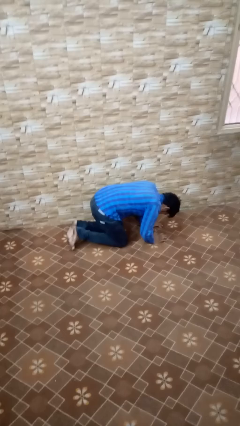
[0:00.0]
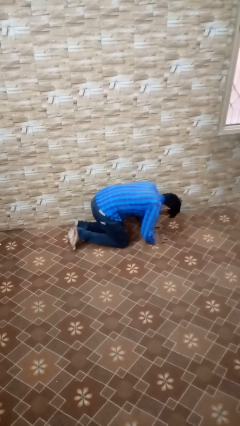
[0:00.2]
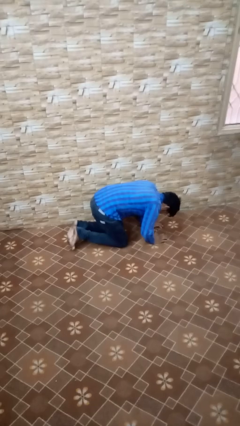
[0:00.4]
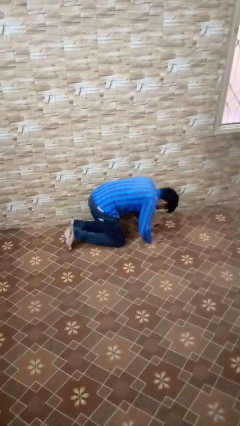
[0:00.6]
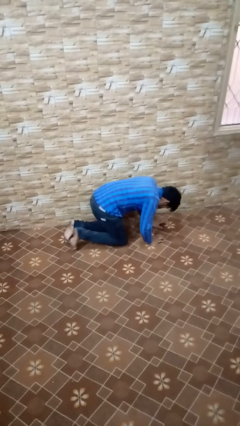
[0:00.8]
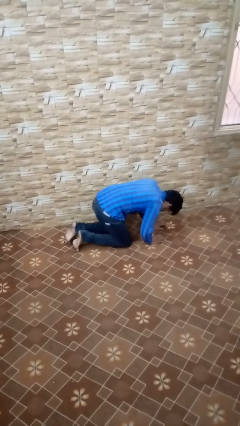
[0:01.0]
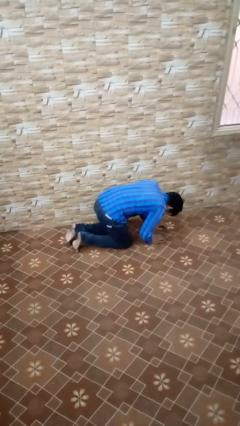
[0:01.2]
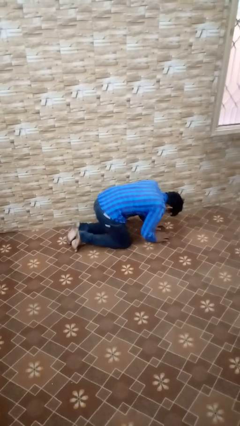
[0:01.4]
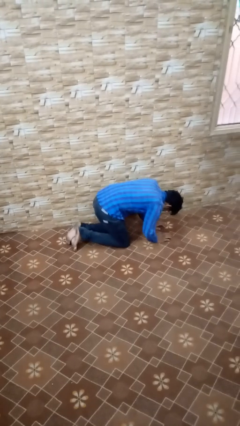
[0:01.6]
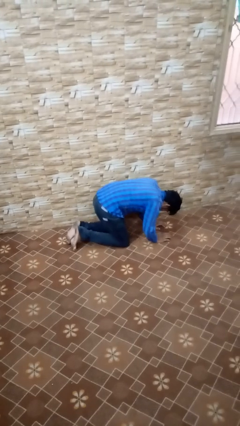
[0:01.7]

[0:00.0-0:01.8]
person crawls

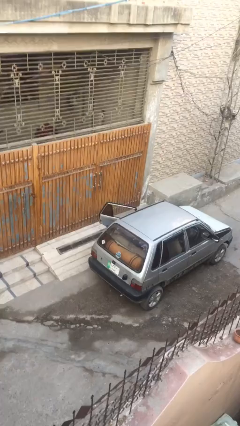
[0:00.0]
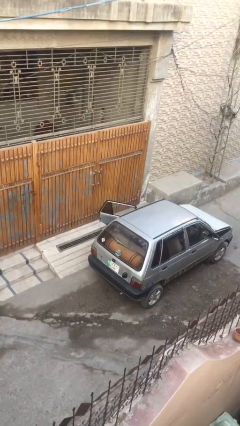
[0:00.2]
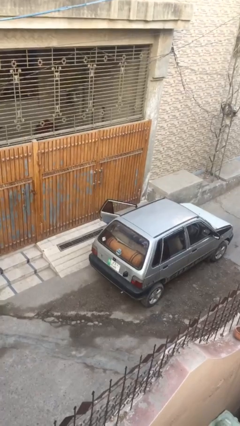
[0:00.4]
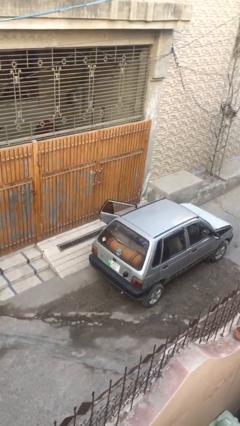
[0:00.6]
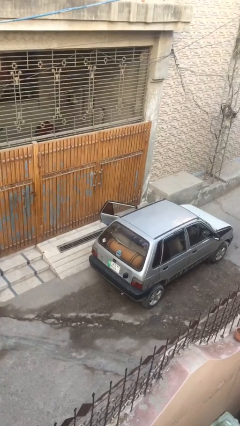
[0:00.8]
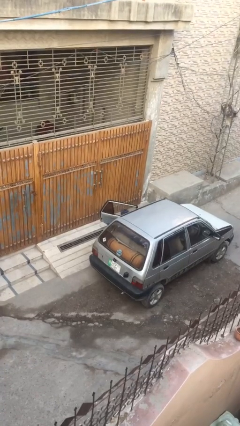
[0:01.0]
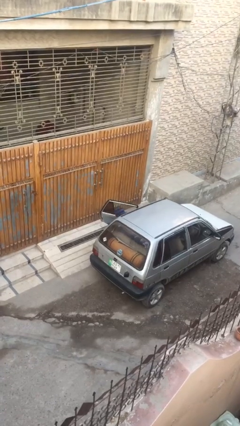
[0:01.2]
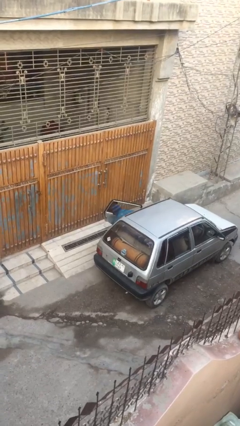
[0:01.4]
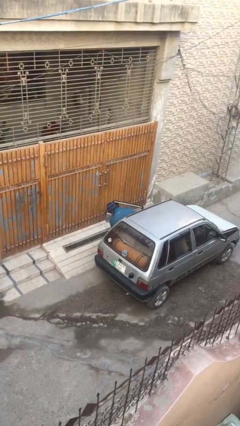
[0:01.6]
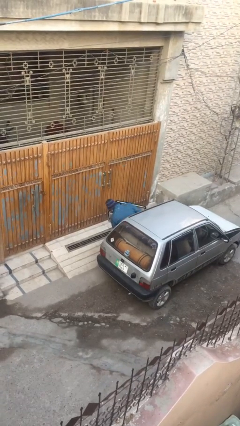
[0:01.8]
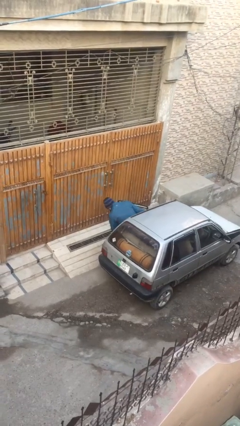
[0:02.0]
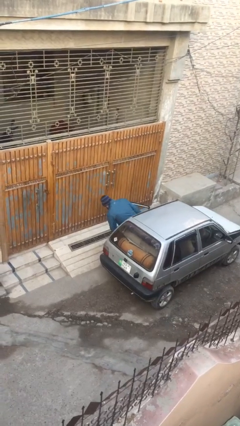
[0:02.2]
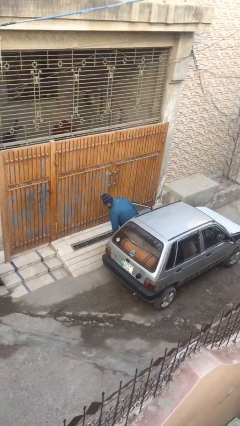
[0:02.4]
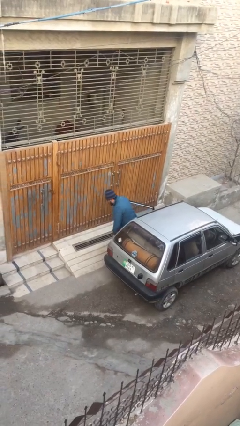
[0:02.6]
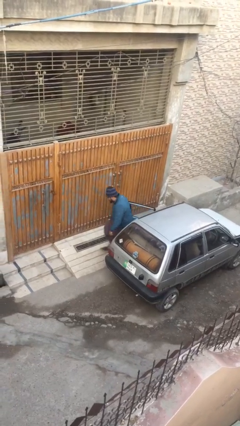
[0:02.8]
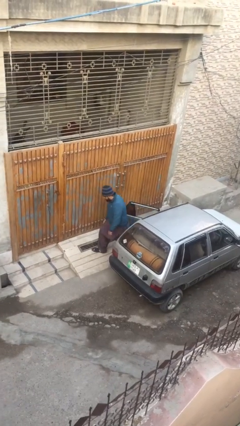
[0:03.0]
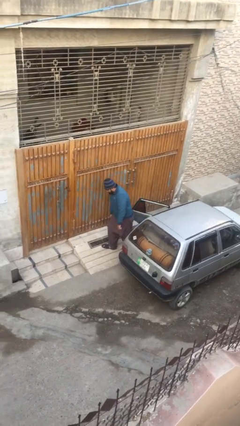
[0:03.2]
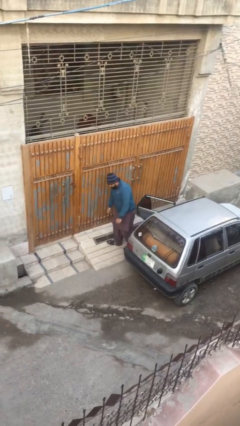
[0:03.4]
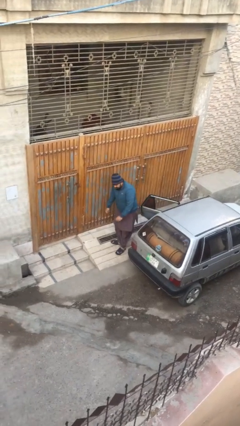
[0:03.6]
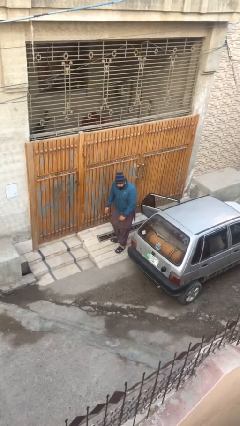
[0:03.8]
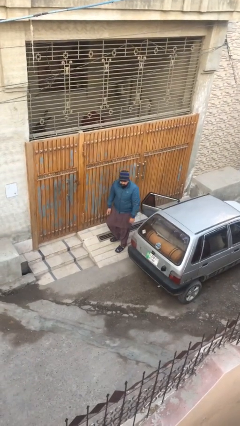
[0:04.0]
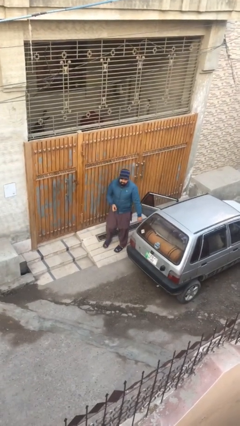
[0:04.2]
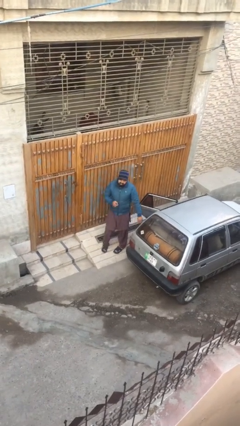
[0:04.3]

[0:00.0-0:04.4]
person exits car

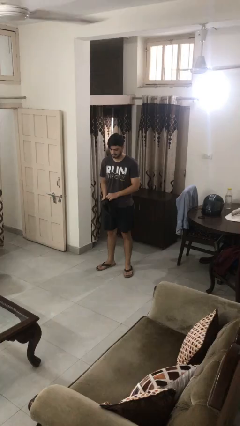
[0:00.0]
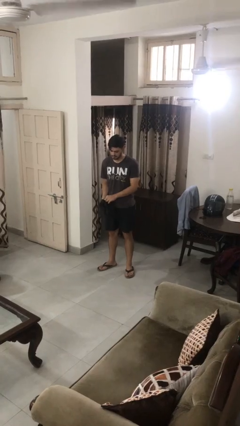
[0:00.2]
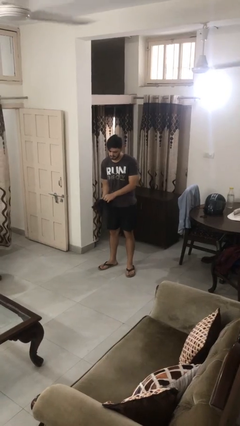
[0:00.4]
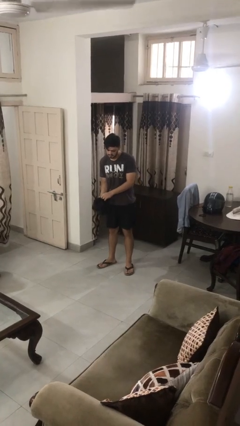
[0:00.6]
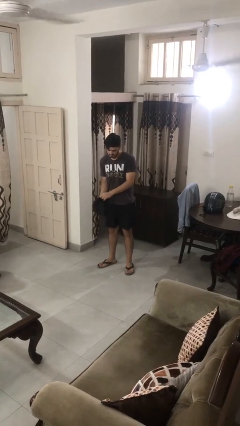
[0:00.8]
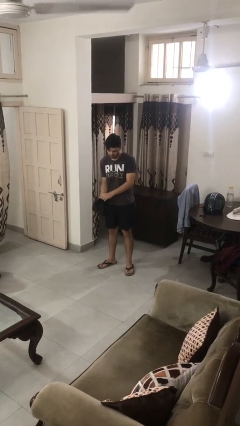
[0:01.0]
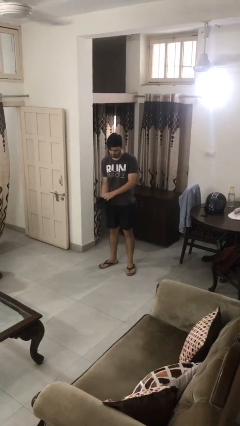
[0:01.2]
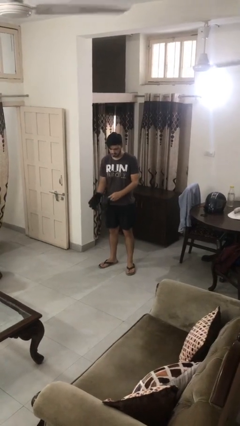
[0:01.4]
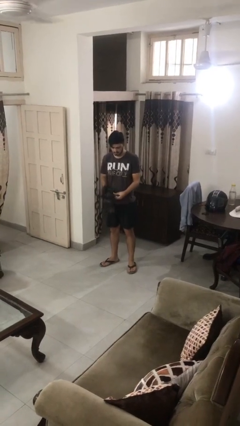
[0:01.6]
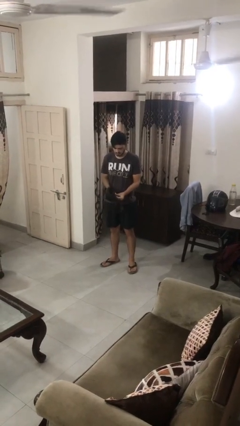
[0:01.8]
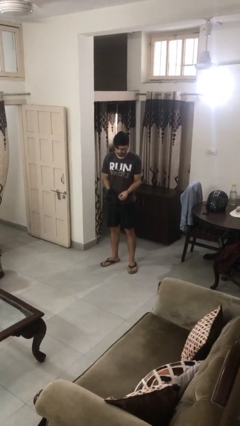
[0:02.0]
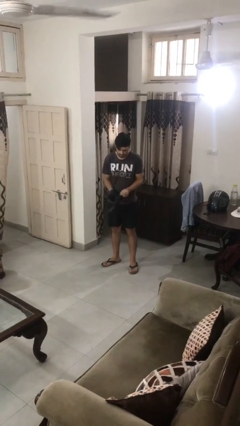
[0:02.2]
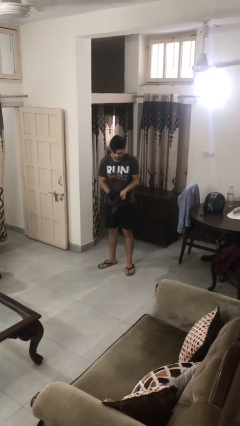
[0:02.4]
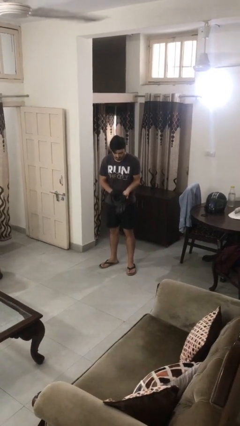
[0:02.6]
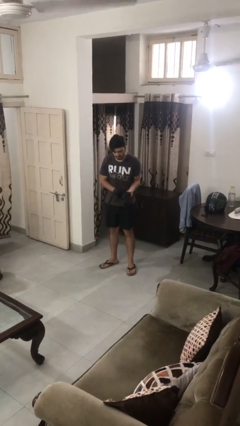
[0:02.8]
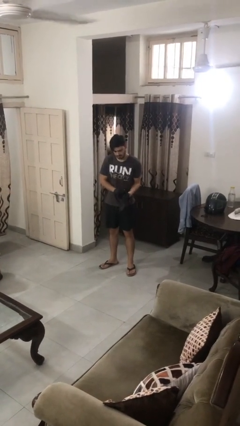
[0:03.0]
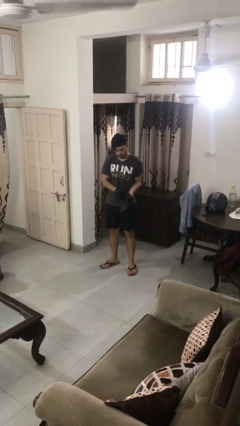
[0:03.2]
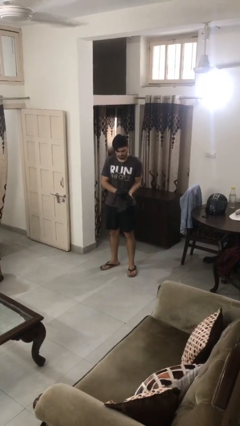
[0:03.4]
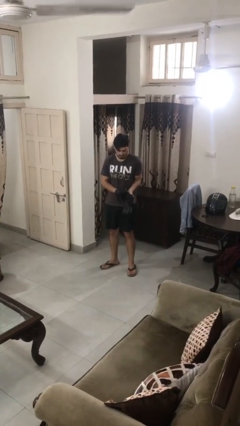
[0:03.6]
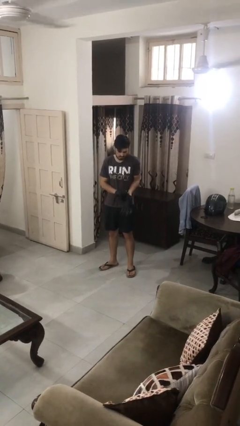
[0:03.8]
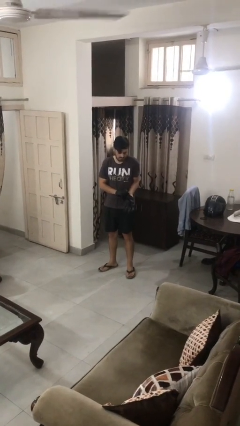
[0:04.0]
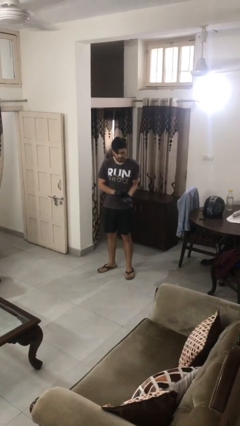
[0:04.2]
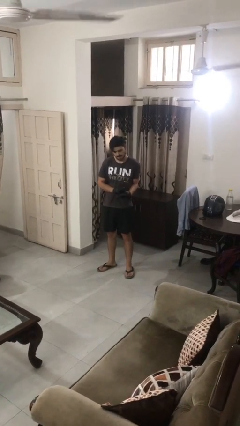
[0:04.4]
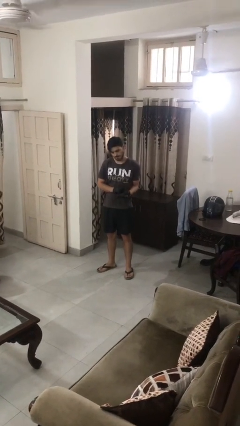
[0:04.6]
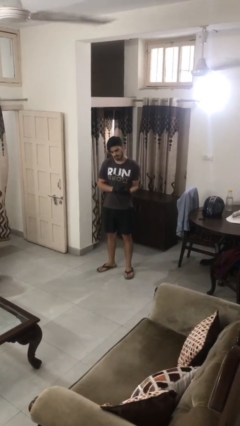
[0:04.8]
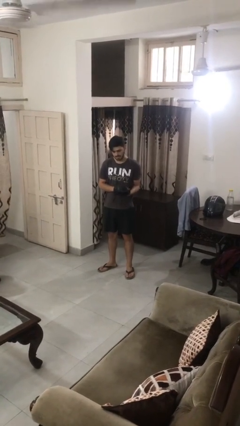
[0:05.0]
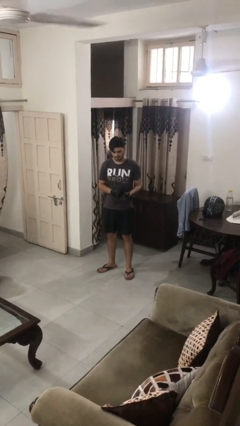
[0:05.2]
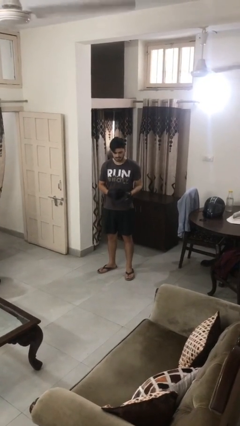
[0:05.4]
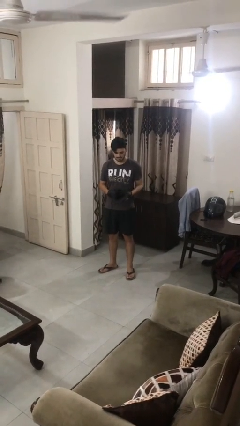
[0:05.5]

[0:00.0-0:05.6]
person puts on gloves

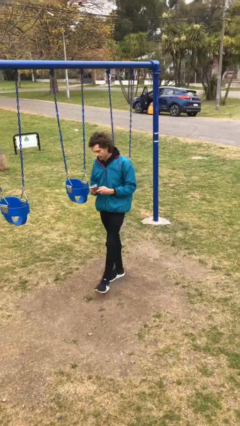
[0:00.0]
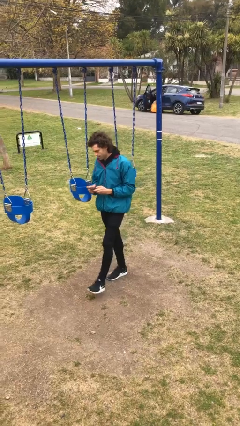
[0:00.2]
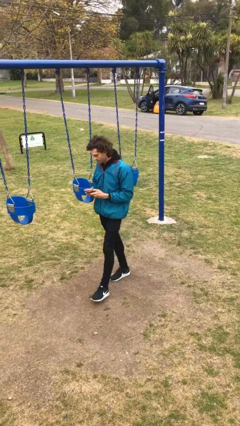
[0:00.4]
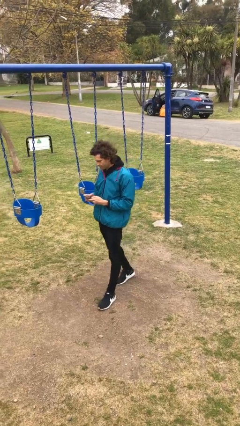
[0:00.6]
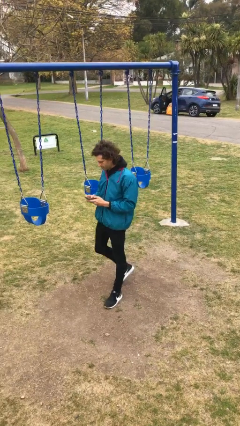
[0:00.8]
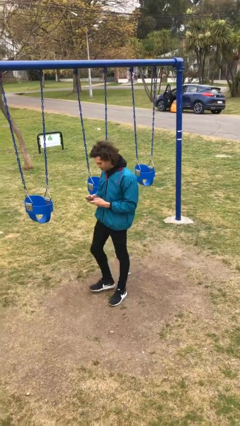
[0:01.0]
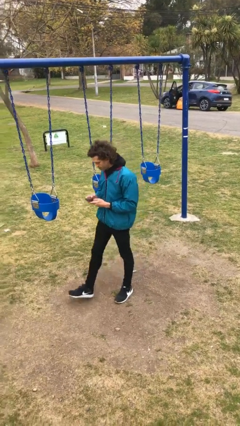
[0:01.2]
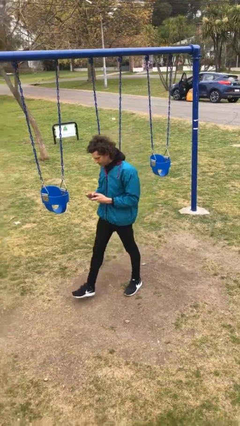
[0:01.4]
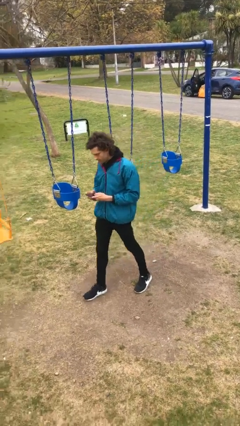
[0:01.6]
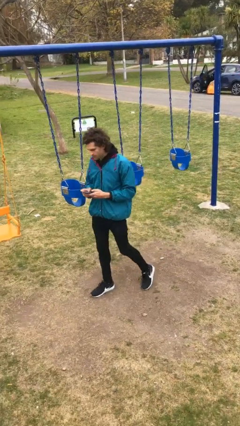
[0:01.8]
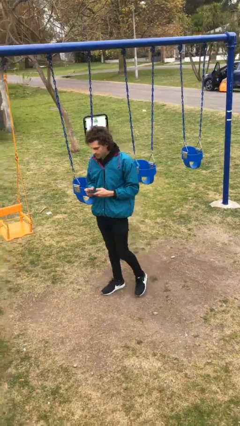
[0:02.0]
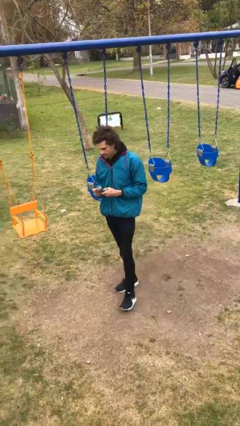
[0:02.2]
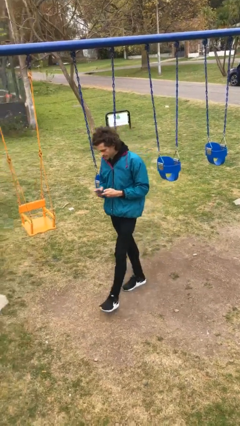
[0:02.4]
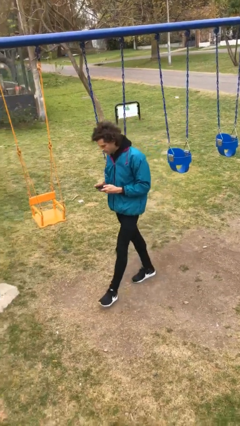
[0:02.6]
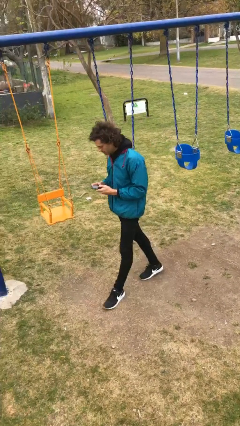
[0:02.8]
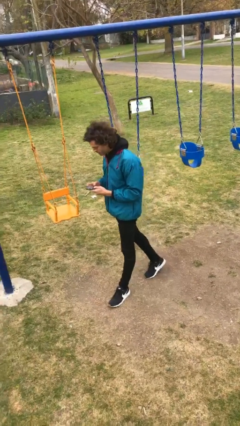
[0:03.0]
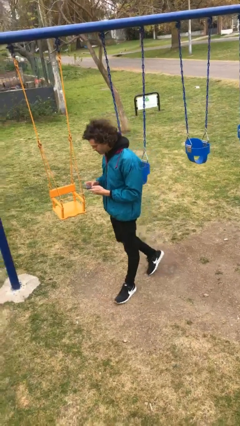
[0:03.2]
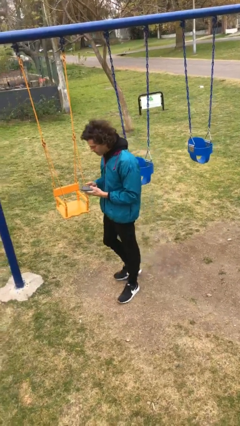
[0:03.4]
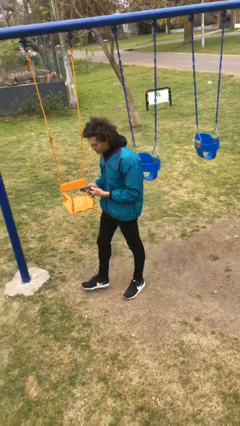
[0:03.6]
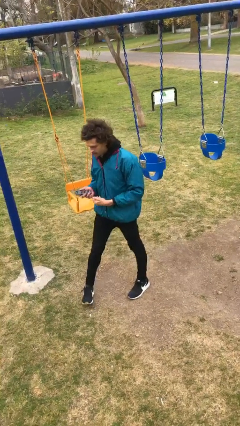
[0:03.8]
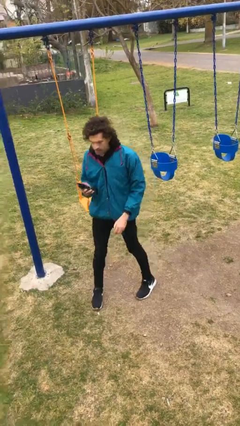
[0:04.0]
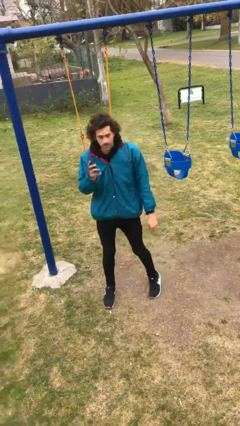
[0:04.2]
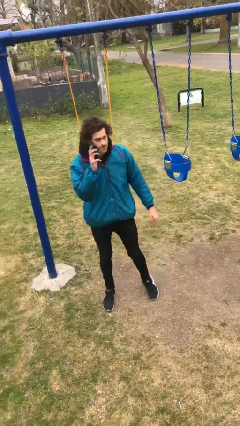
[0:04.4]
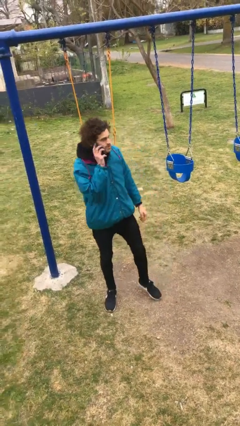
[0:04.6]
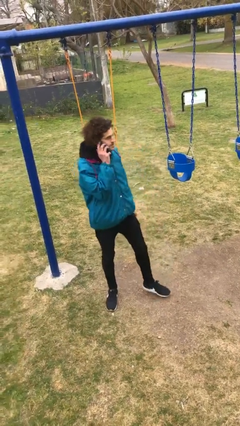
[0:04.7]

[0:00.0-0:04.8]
person texts on phone

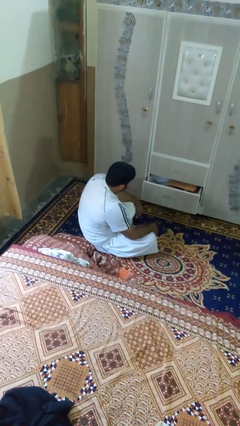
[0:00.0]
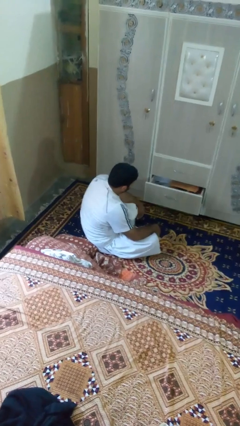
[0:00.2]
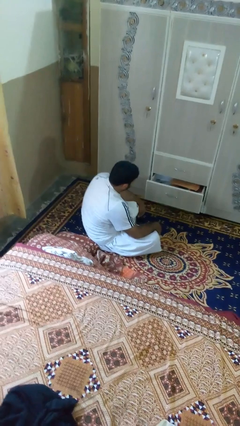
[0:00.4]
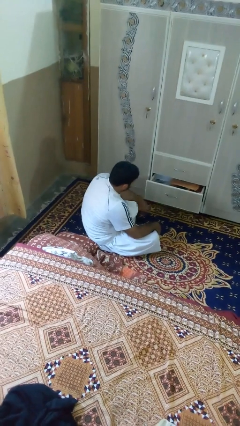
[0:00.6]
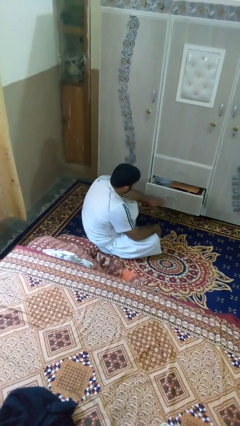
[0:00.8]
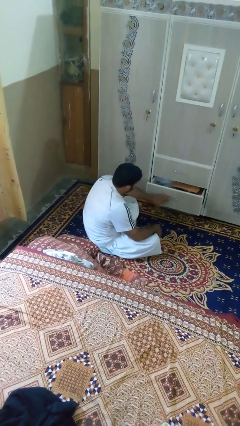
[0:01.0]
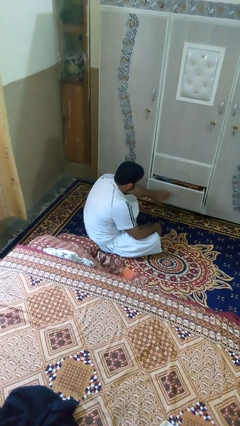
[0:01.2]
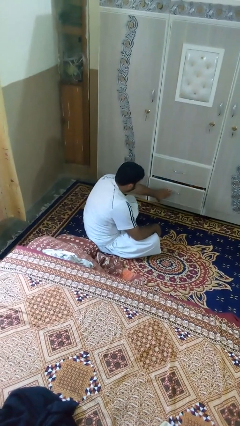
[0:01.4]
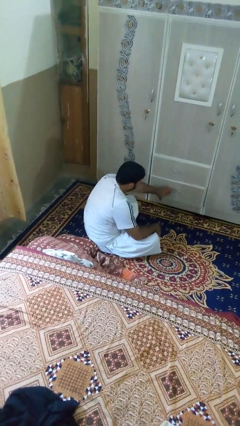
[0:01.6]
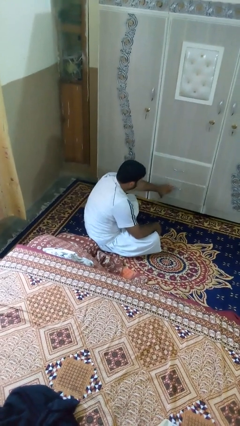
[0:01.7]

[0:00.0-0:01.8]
person closes dresser drawer
